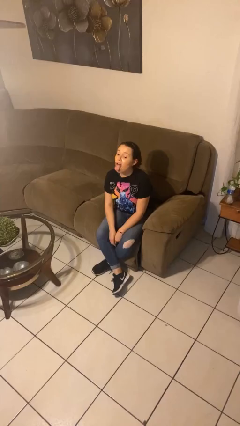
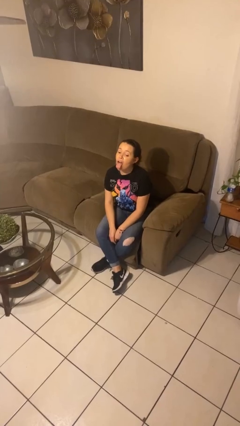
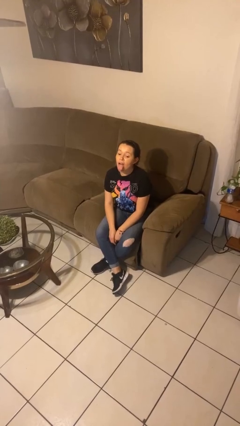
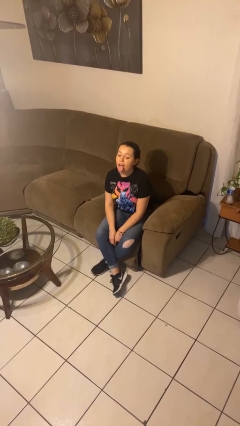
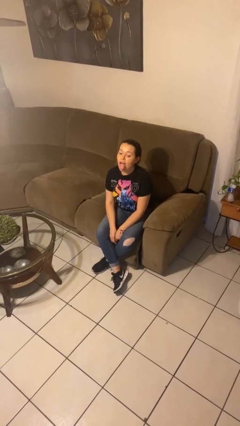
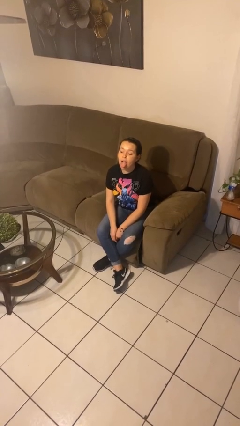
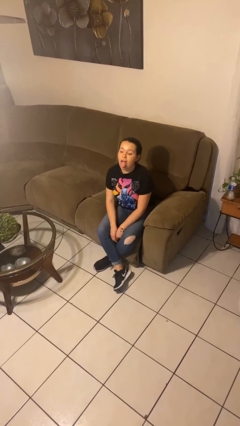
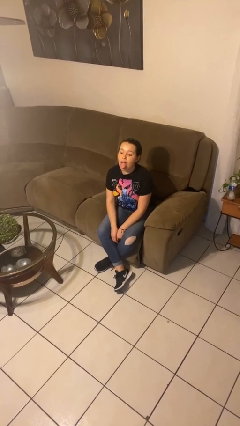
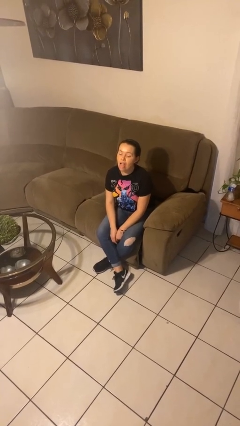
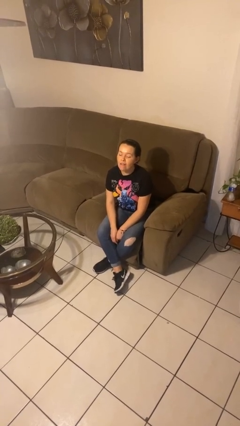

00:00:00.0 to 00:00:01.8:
person sticks out tongue

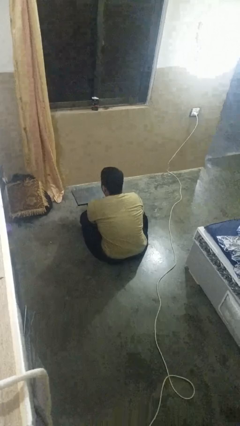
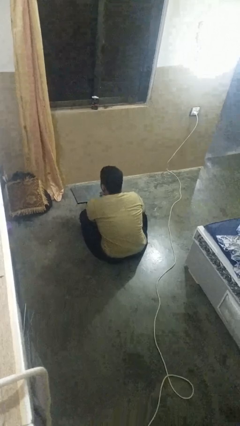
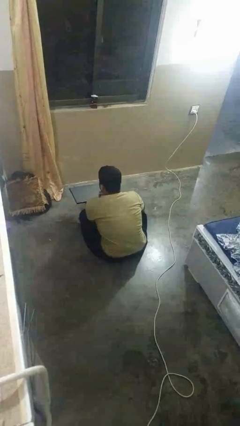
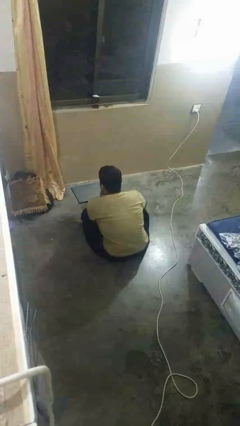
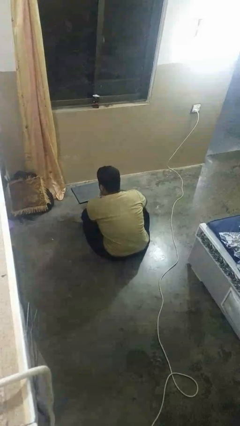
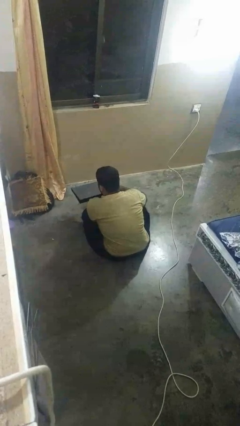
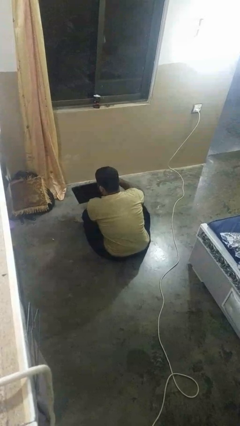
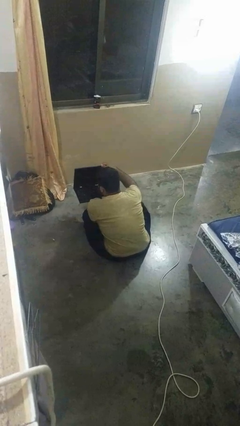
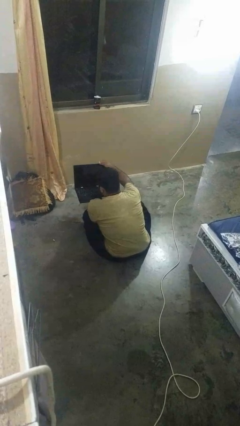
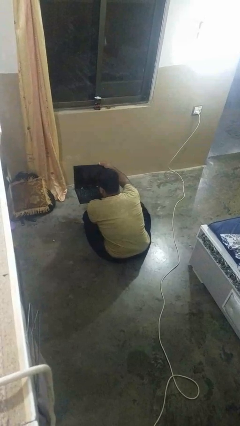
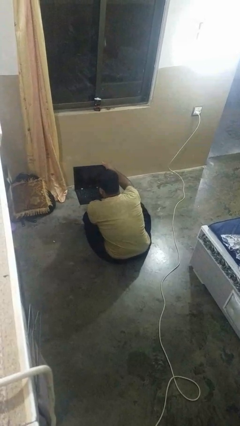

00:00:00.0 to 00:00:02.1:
person opens laptop

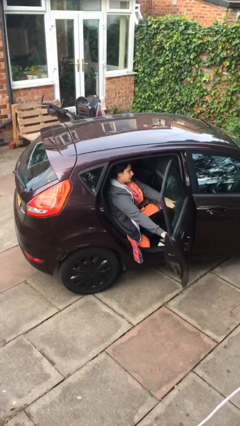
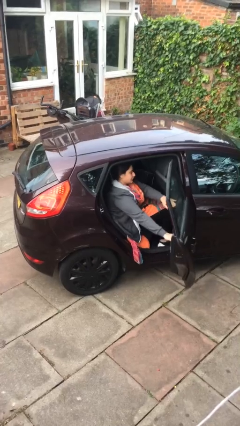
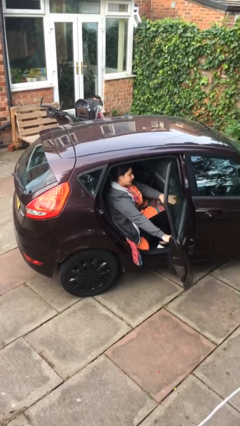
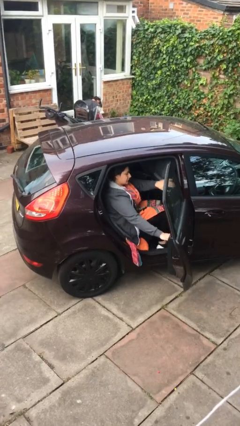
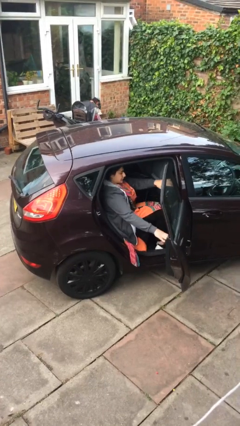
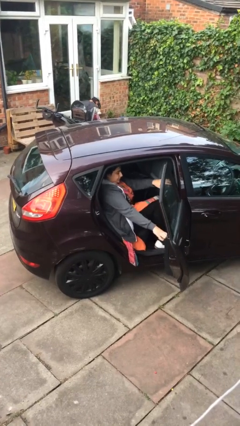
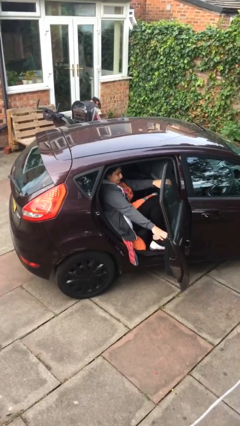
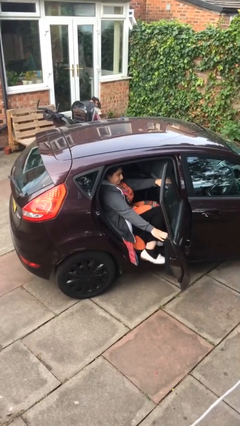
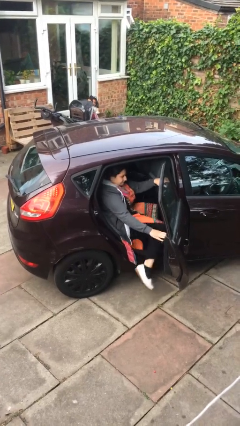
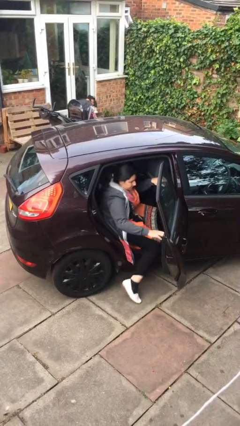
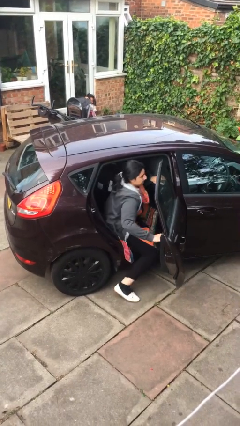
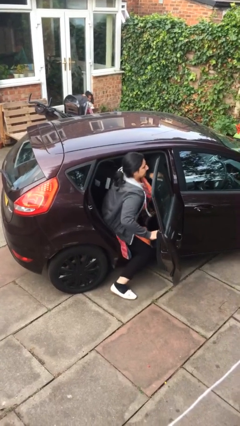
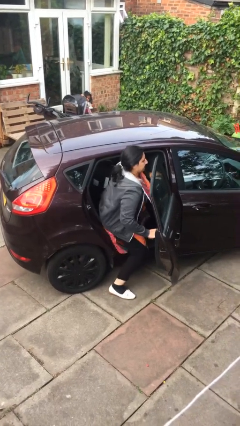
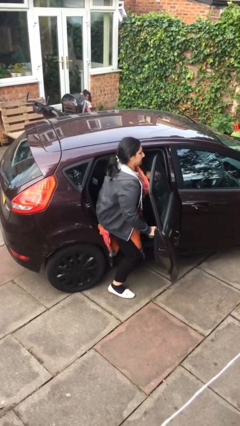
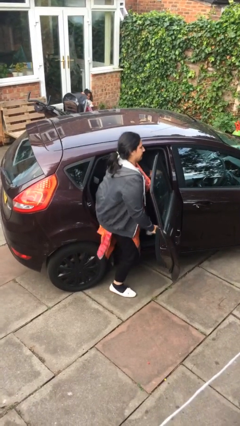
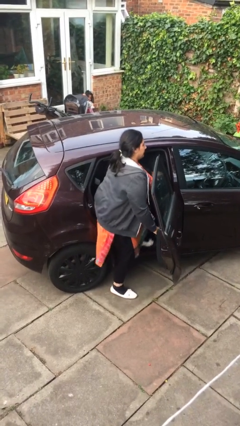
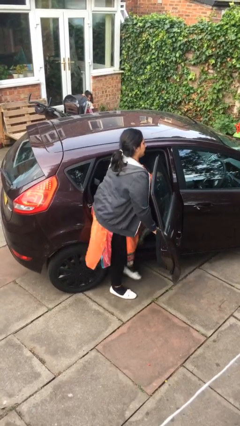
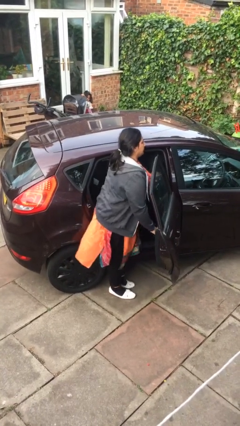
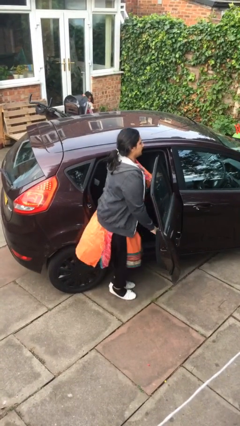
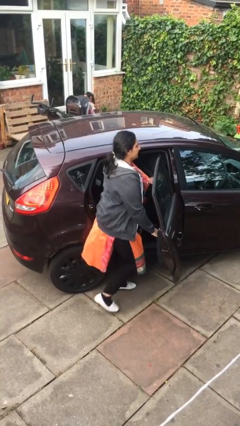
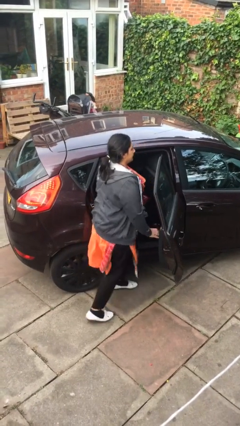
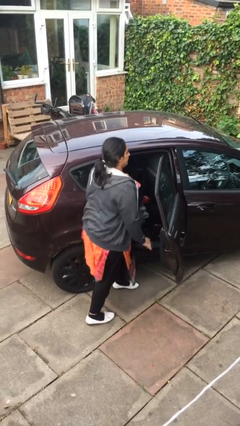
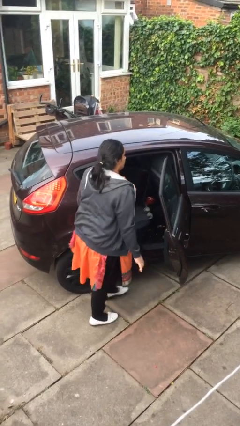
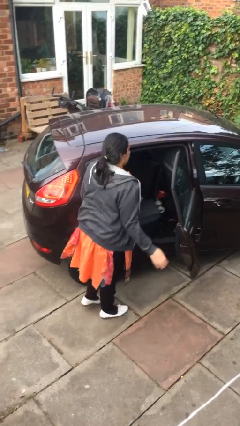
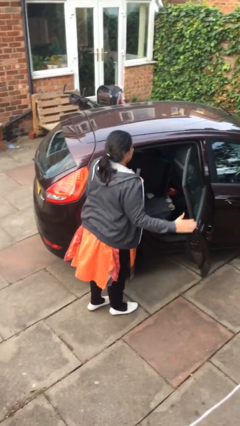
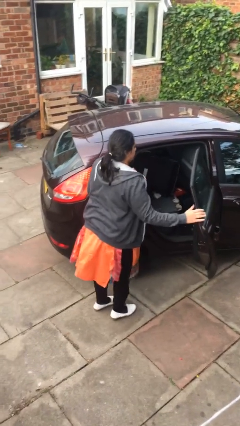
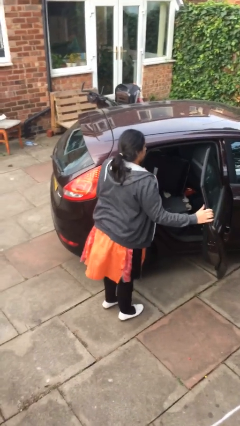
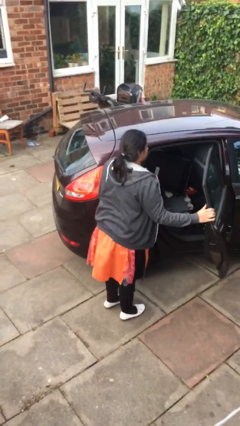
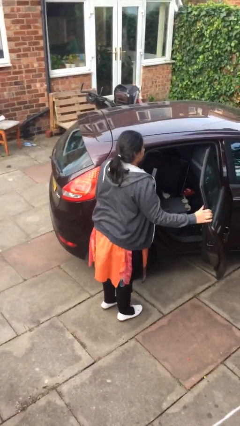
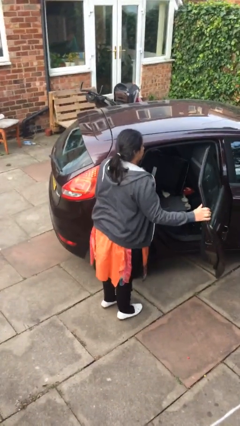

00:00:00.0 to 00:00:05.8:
person exits car

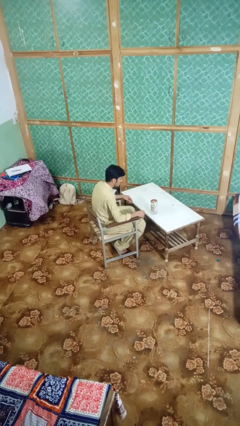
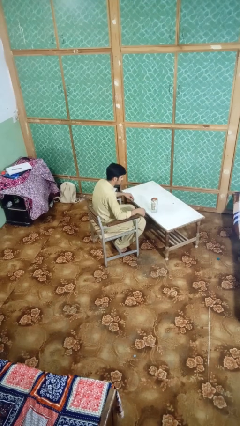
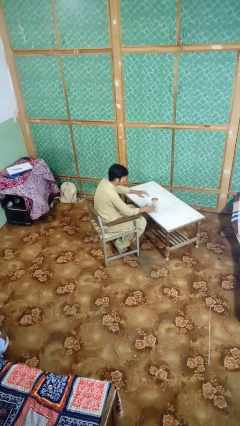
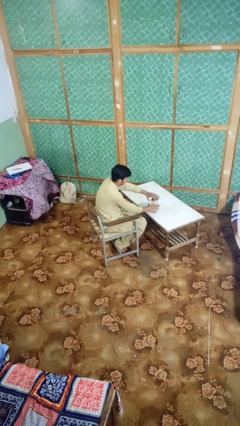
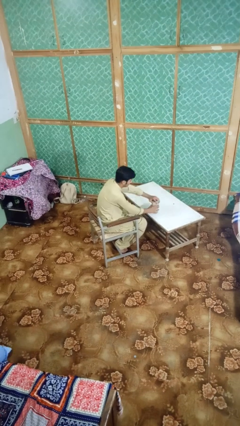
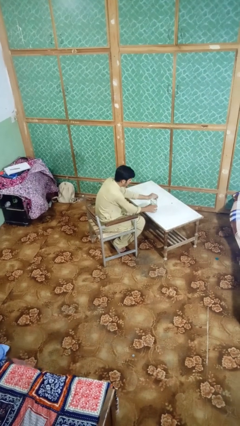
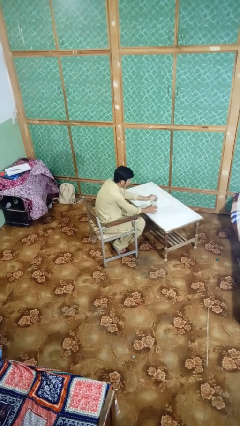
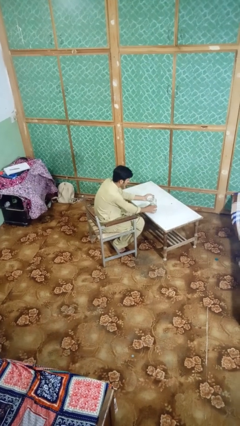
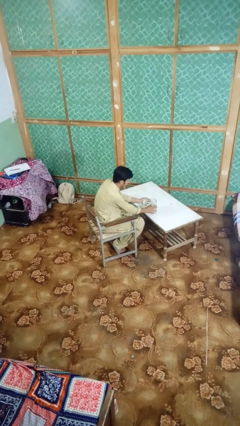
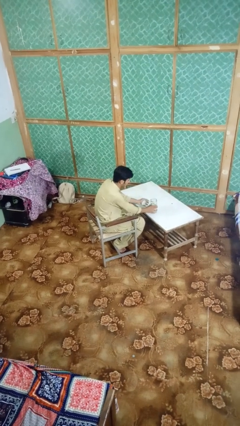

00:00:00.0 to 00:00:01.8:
person opens jar

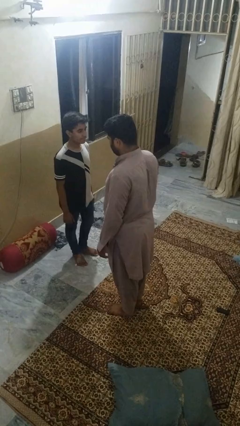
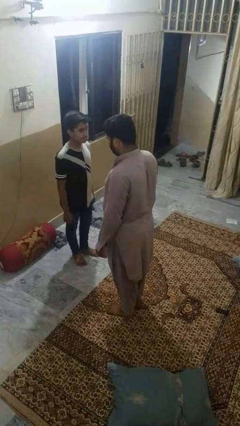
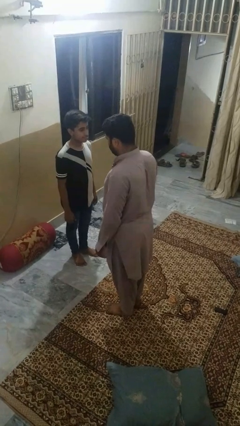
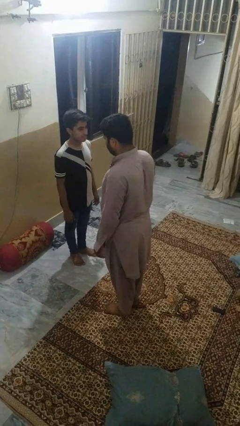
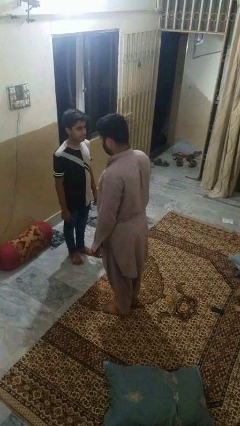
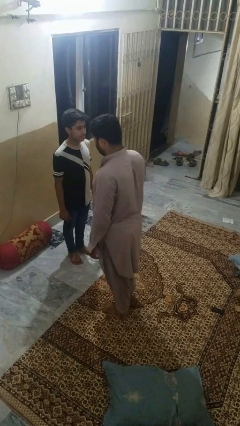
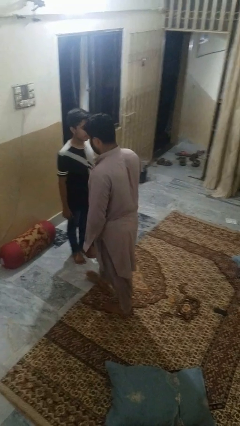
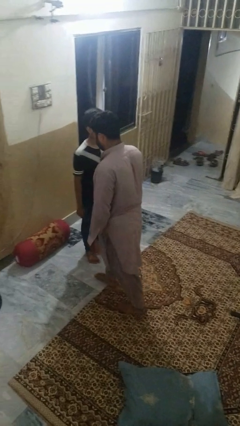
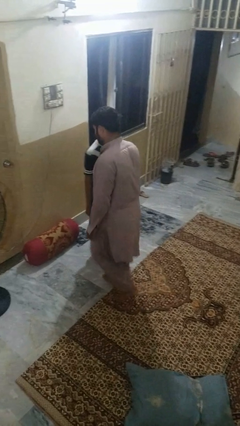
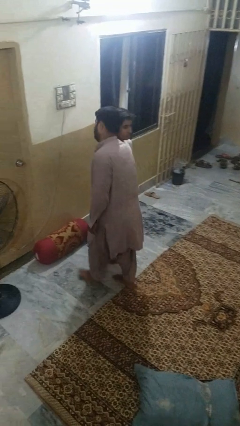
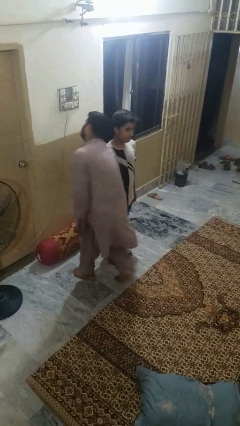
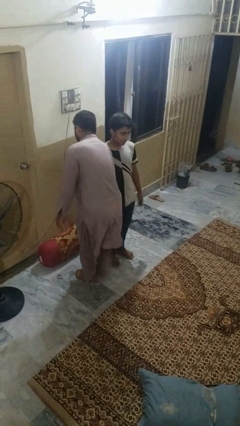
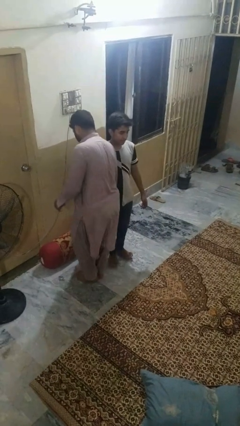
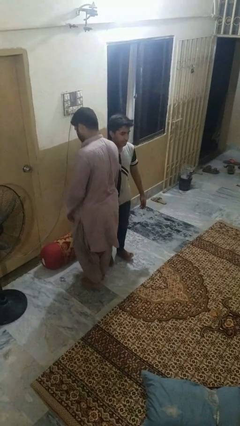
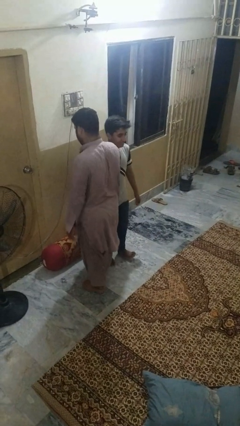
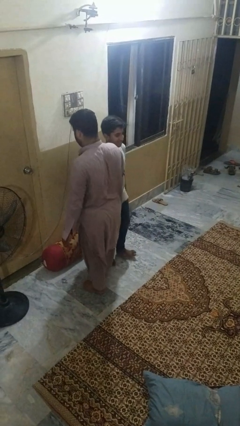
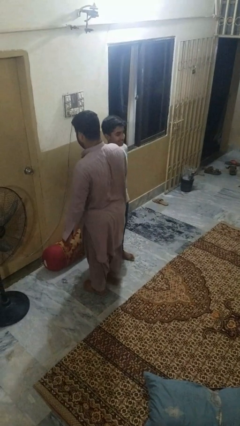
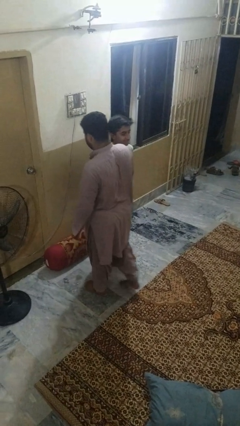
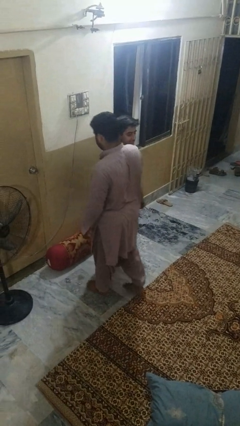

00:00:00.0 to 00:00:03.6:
person bumps into person

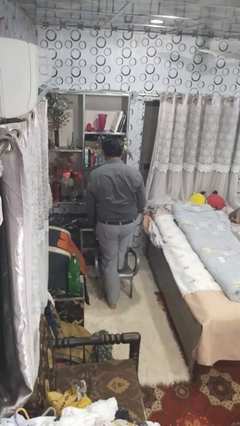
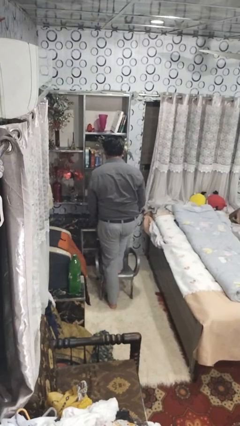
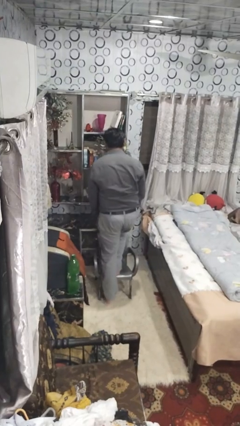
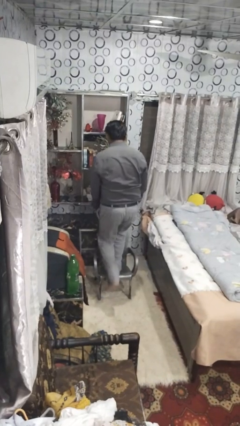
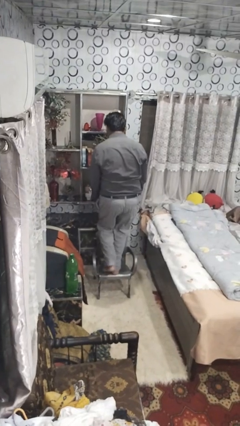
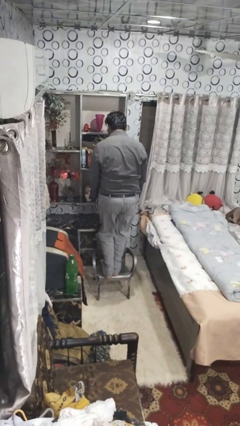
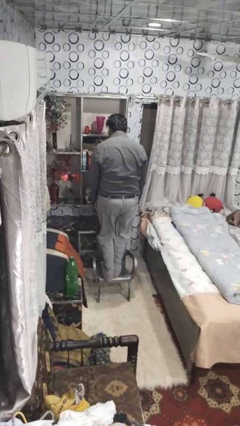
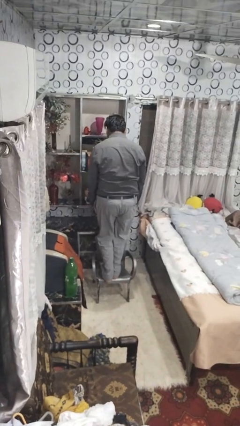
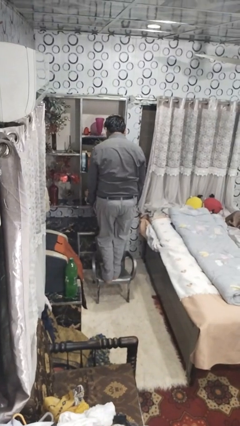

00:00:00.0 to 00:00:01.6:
person climbs on chair

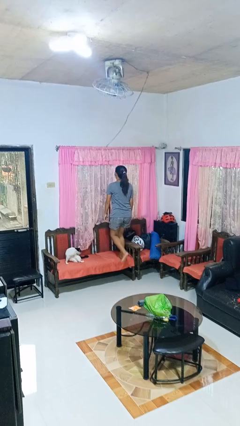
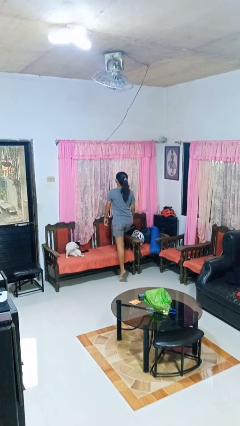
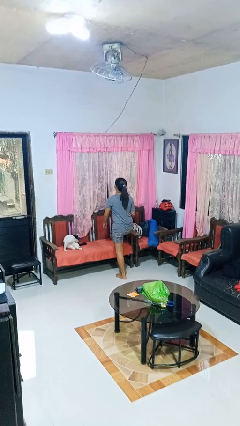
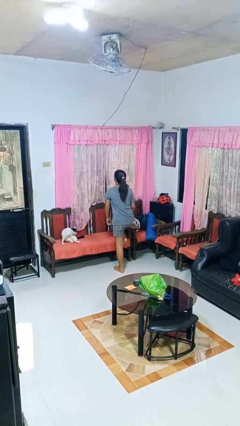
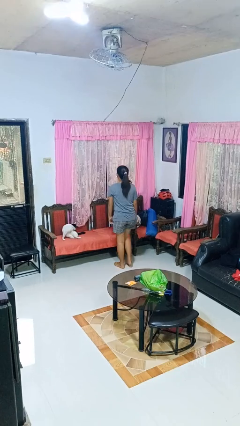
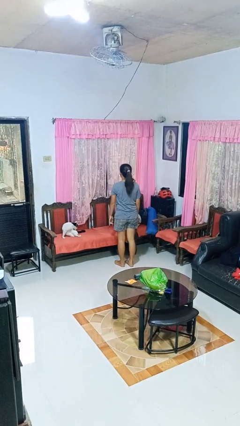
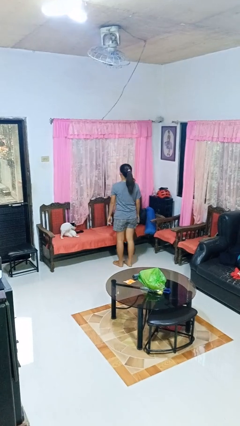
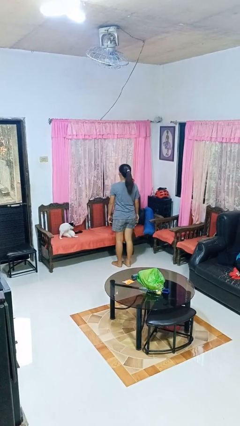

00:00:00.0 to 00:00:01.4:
person climbs off chair
